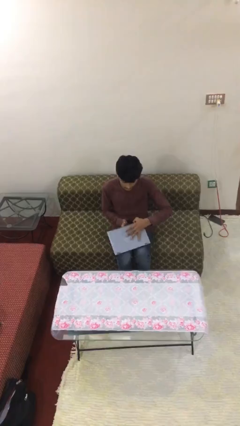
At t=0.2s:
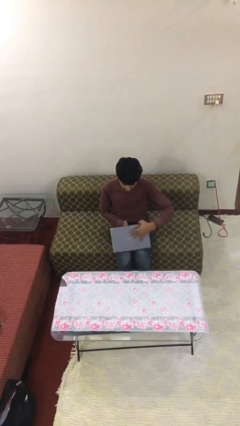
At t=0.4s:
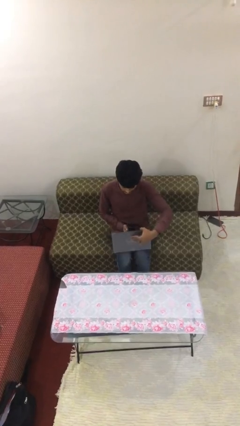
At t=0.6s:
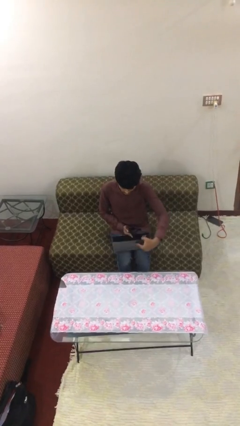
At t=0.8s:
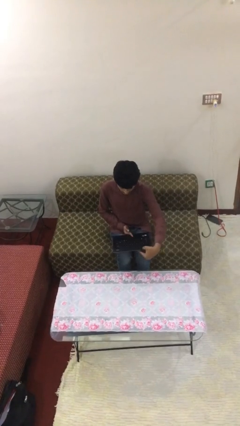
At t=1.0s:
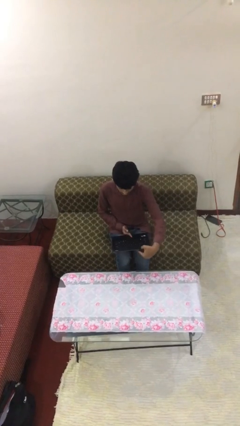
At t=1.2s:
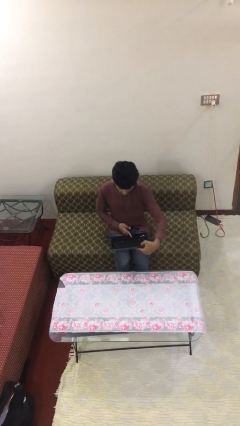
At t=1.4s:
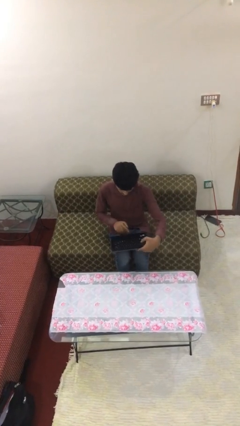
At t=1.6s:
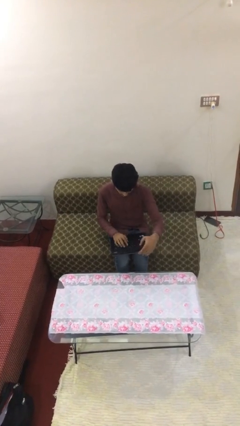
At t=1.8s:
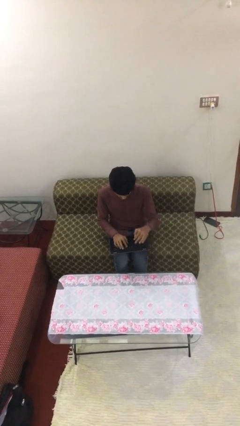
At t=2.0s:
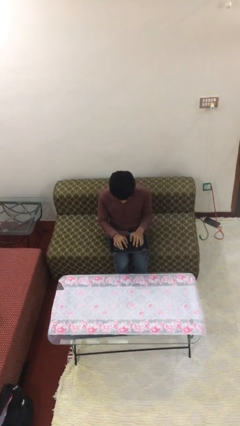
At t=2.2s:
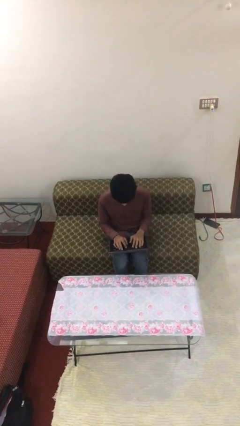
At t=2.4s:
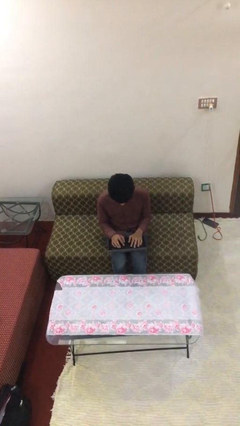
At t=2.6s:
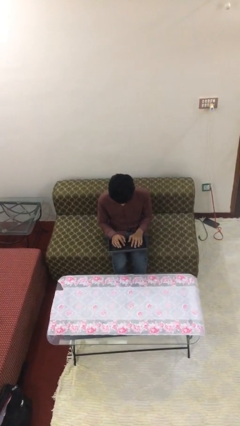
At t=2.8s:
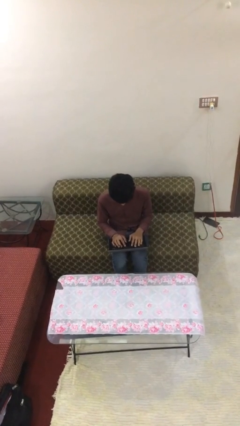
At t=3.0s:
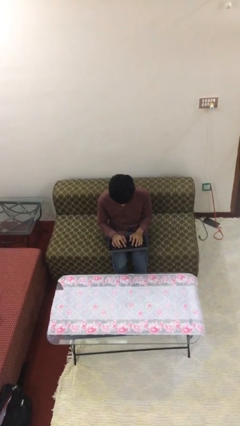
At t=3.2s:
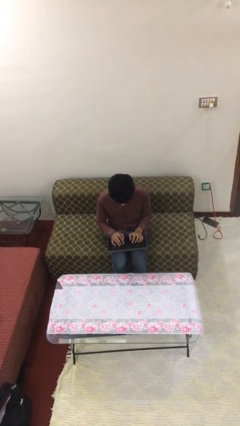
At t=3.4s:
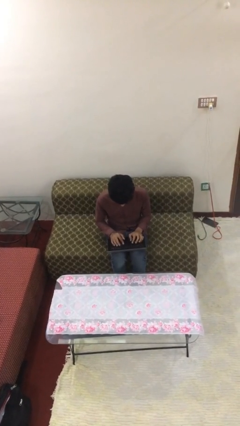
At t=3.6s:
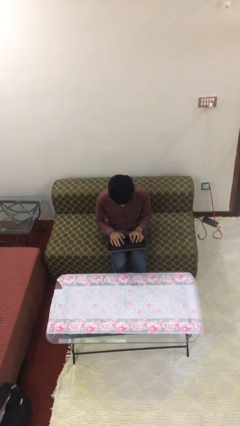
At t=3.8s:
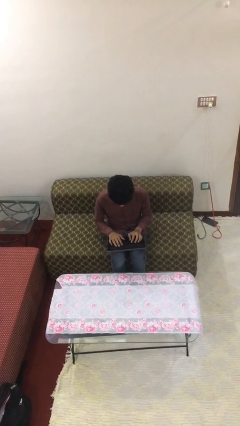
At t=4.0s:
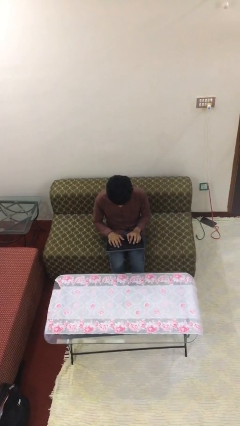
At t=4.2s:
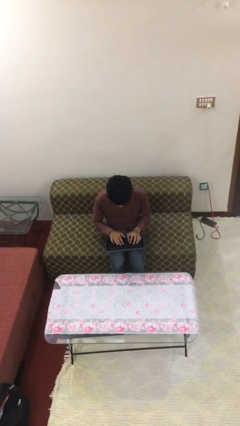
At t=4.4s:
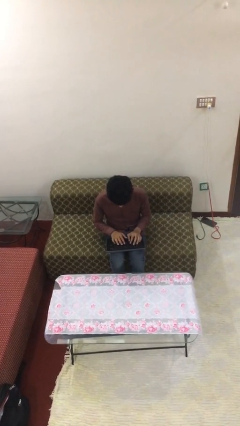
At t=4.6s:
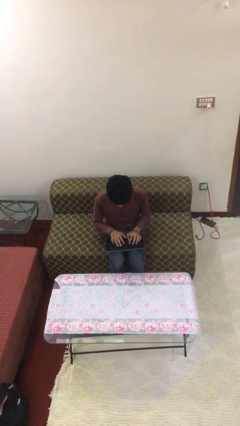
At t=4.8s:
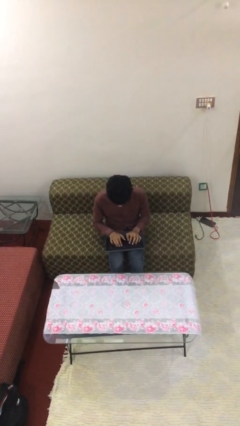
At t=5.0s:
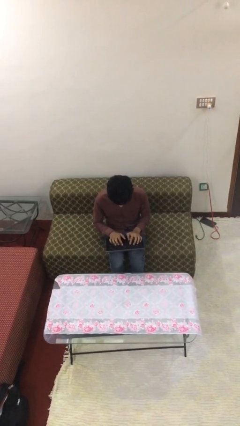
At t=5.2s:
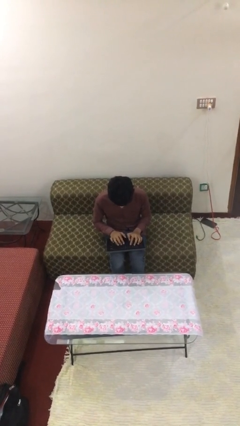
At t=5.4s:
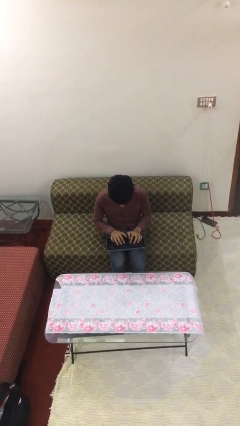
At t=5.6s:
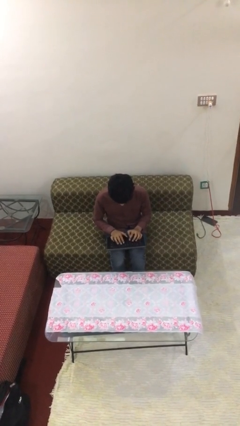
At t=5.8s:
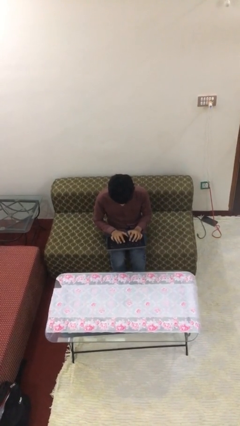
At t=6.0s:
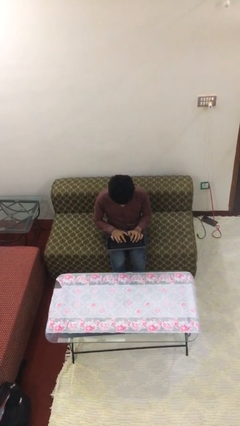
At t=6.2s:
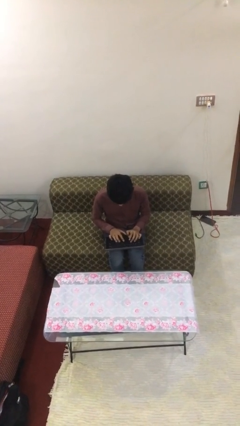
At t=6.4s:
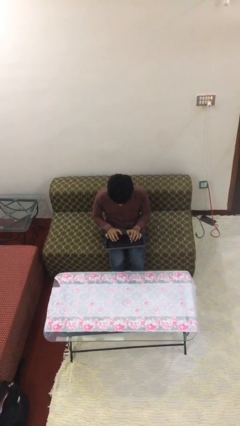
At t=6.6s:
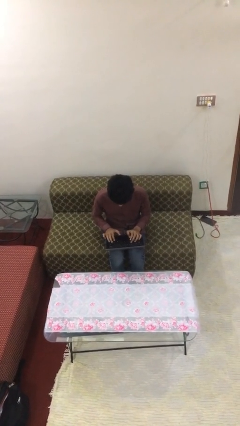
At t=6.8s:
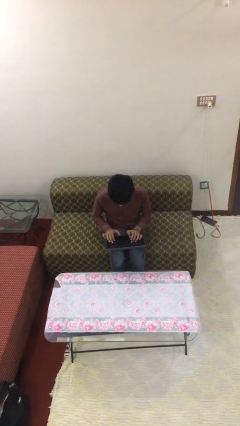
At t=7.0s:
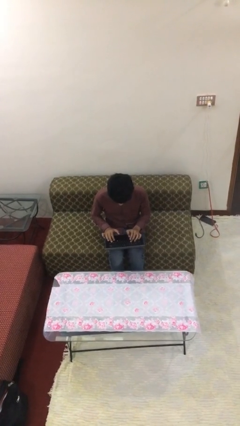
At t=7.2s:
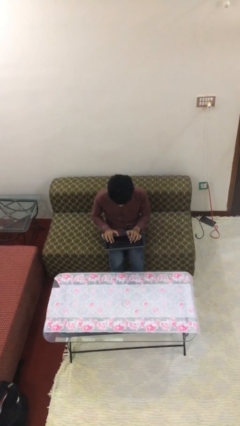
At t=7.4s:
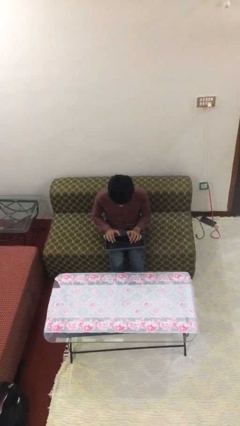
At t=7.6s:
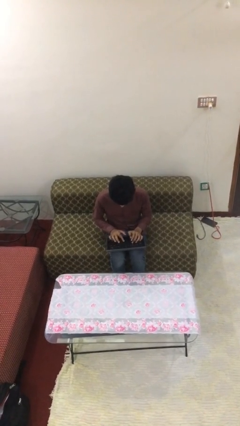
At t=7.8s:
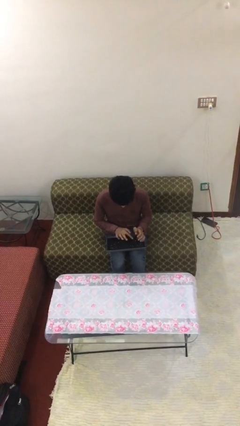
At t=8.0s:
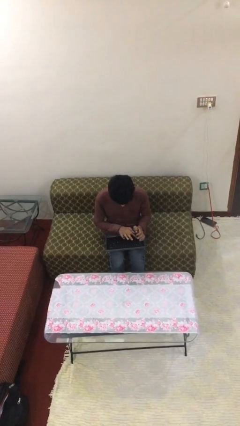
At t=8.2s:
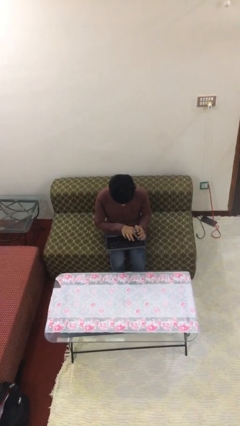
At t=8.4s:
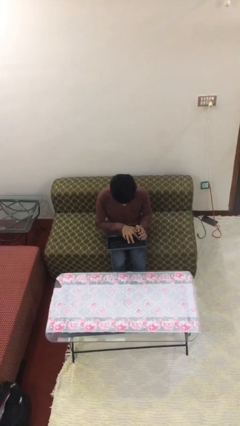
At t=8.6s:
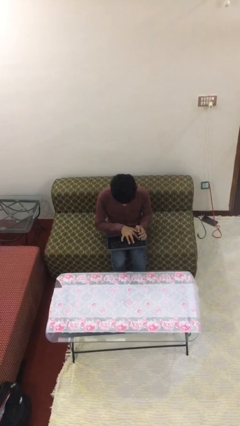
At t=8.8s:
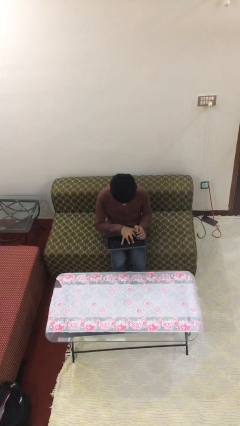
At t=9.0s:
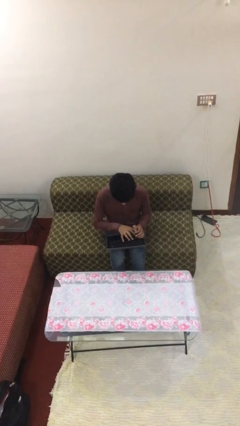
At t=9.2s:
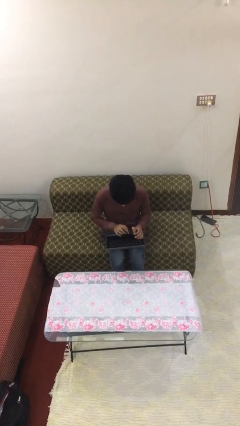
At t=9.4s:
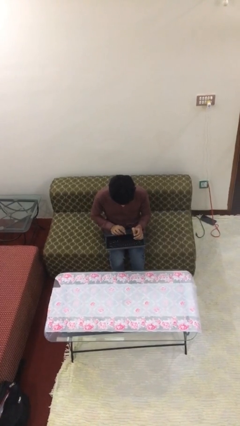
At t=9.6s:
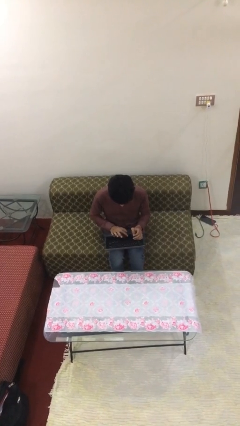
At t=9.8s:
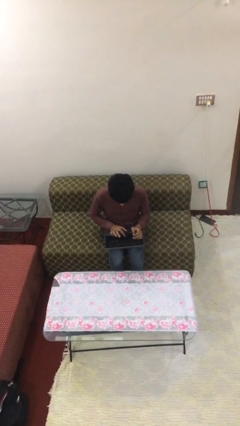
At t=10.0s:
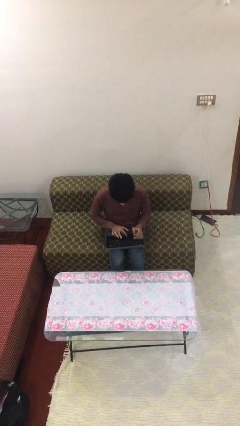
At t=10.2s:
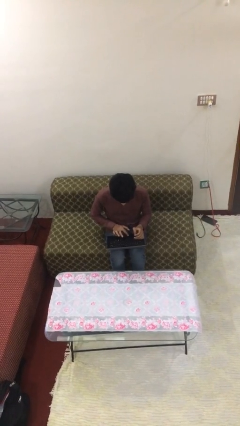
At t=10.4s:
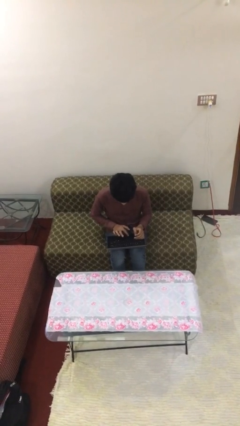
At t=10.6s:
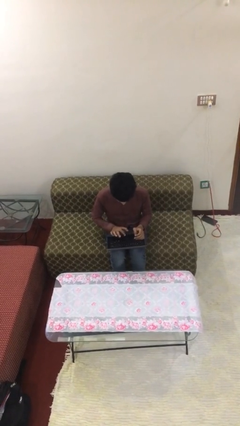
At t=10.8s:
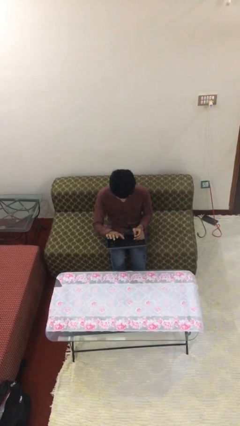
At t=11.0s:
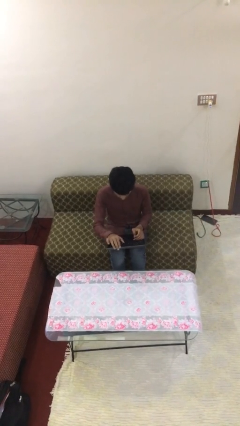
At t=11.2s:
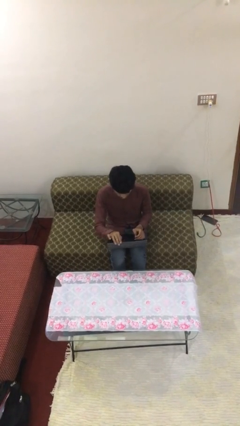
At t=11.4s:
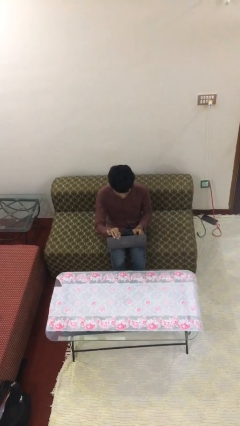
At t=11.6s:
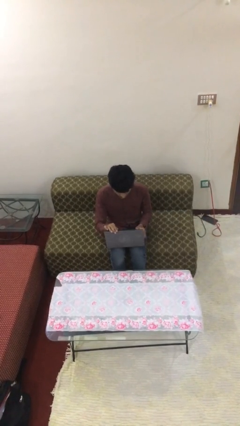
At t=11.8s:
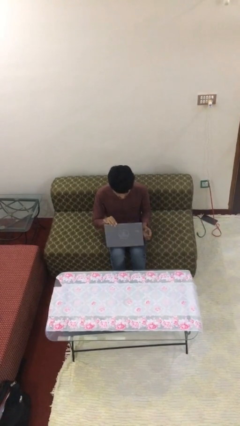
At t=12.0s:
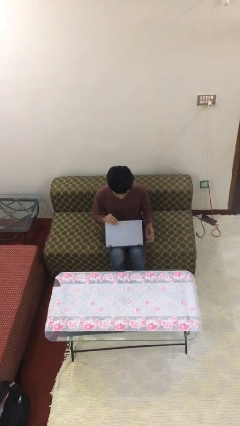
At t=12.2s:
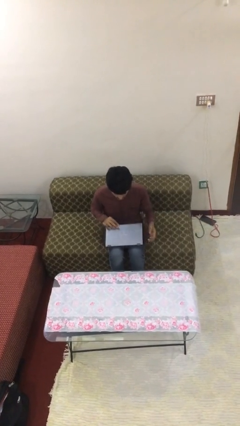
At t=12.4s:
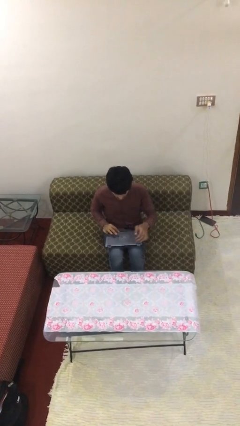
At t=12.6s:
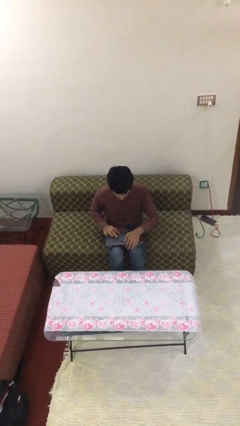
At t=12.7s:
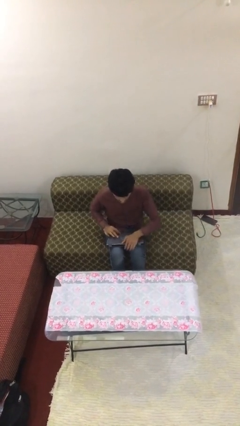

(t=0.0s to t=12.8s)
person interacts with laptop

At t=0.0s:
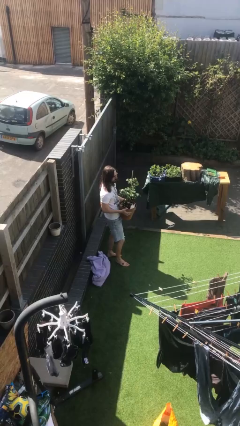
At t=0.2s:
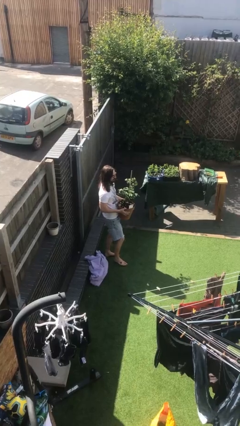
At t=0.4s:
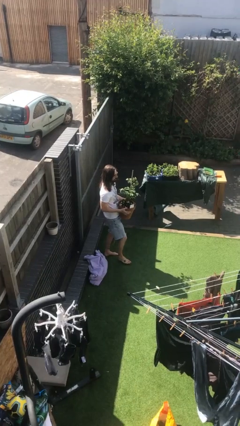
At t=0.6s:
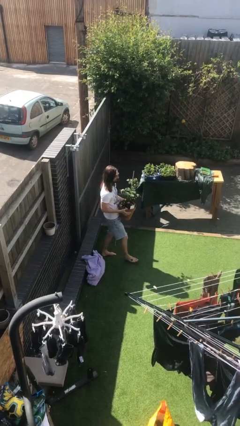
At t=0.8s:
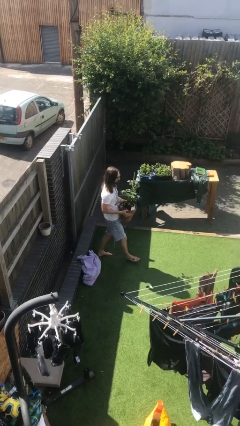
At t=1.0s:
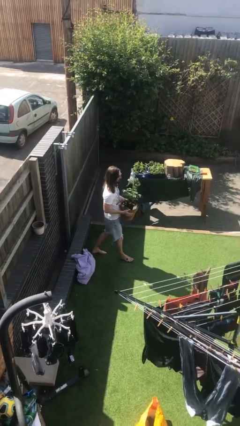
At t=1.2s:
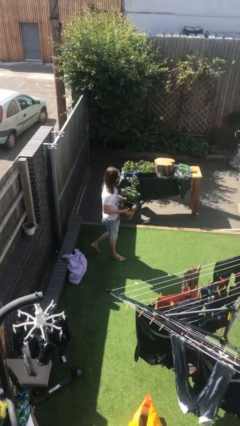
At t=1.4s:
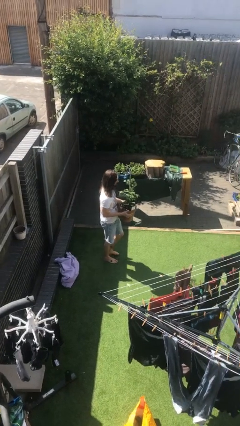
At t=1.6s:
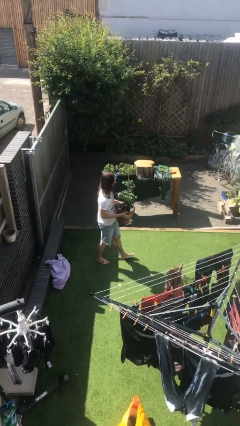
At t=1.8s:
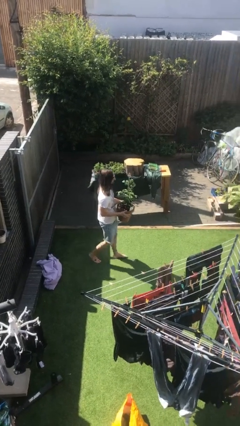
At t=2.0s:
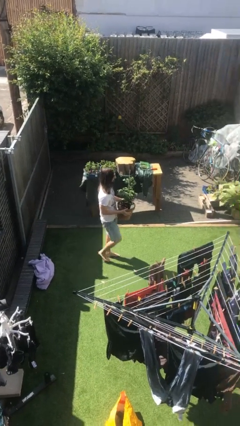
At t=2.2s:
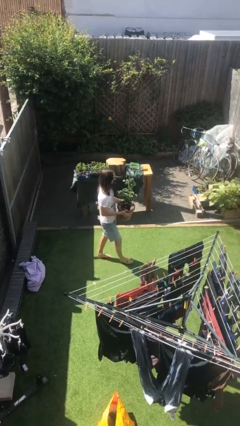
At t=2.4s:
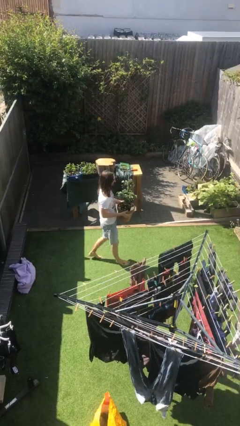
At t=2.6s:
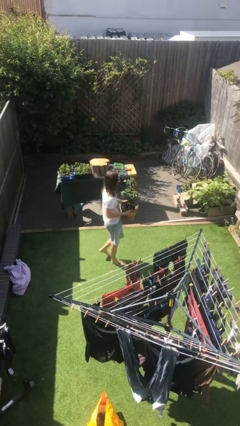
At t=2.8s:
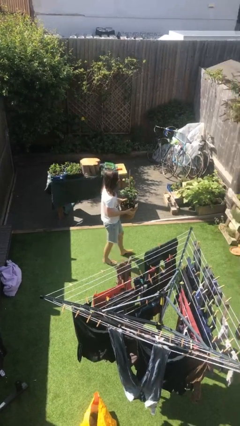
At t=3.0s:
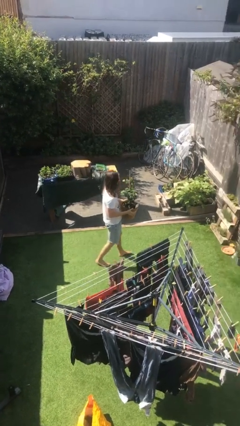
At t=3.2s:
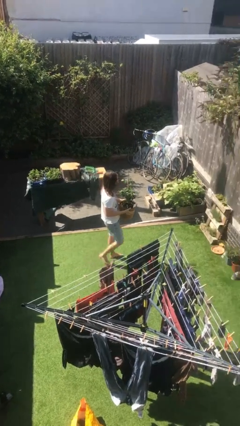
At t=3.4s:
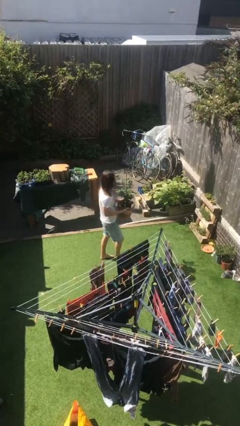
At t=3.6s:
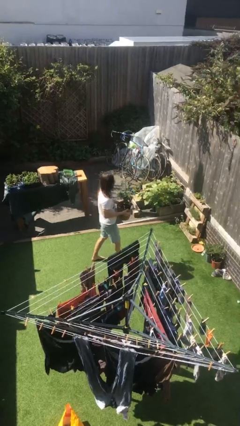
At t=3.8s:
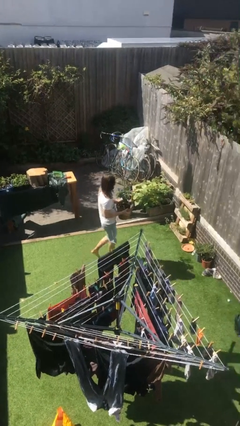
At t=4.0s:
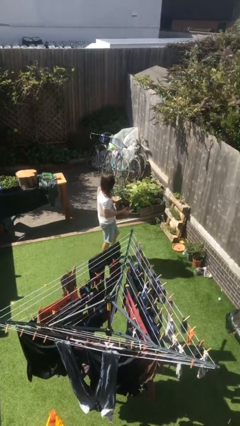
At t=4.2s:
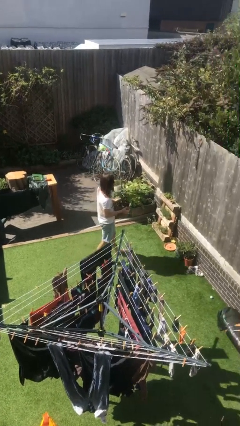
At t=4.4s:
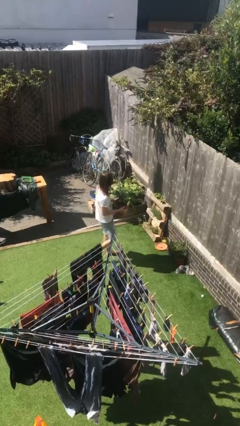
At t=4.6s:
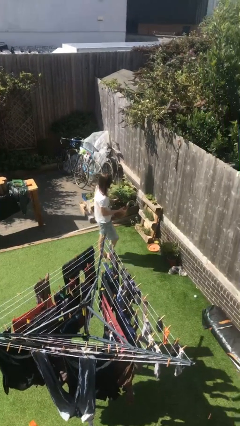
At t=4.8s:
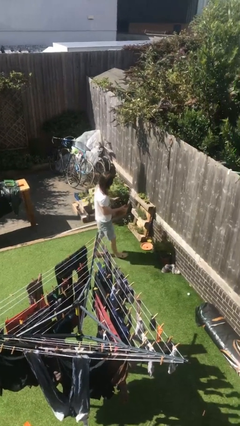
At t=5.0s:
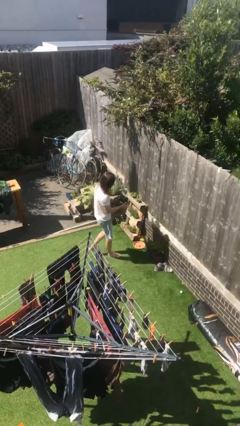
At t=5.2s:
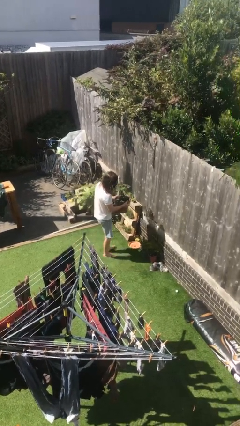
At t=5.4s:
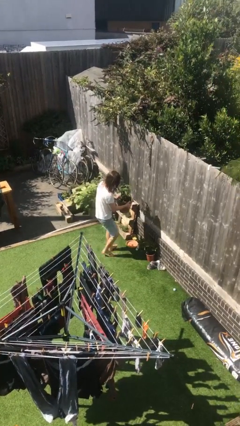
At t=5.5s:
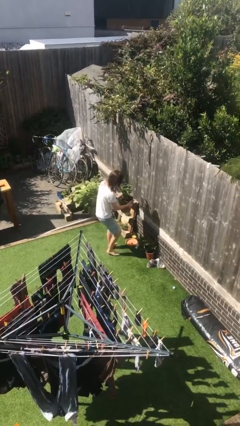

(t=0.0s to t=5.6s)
person carries heavy object

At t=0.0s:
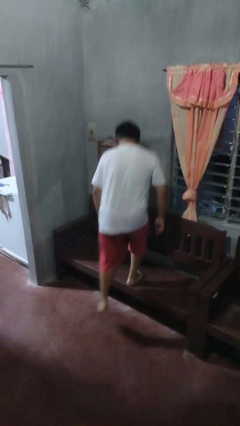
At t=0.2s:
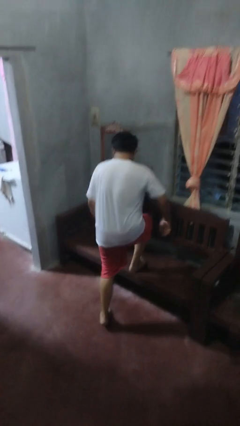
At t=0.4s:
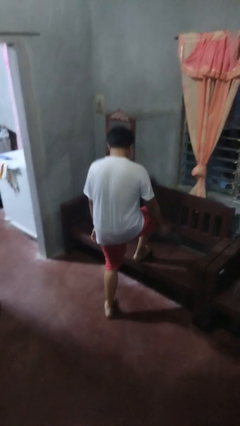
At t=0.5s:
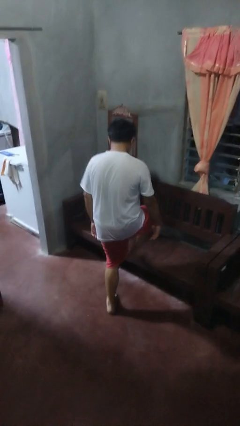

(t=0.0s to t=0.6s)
person climbs off couch
